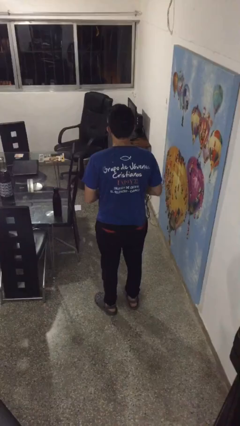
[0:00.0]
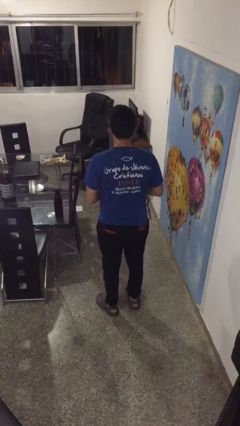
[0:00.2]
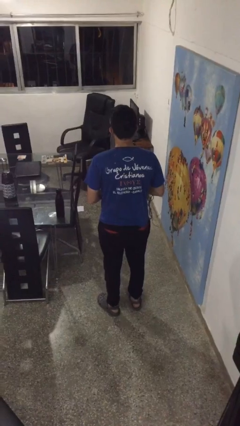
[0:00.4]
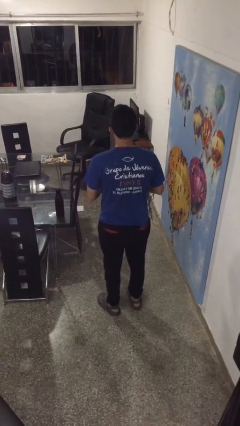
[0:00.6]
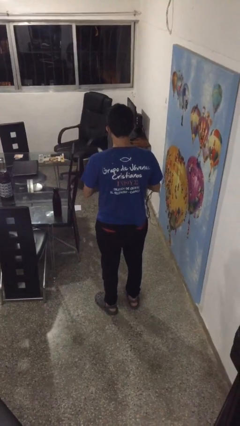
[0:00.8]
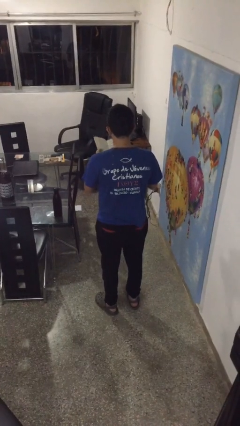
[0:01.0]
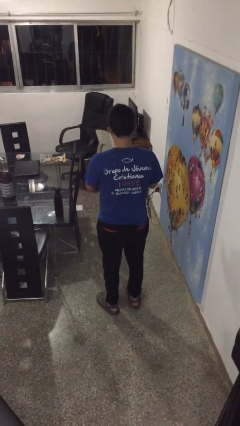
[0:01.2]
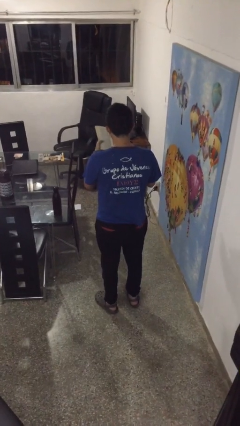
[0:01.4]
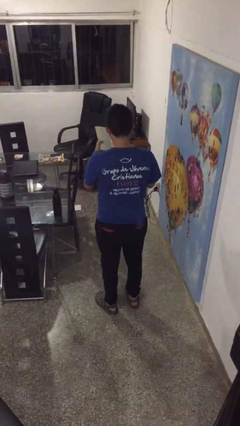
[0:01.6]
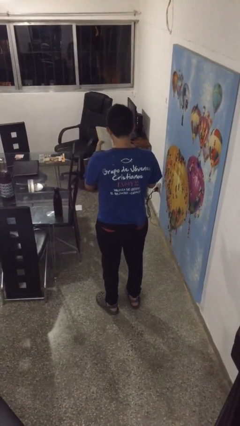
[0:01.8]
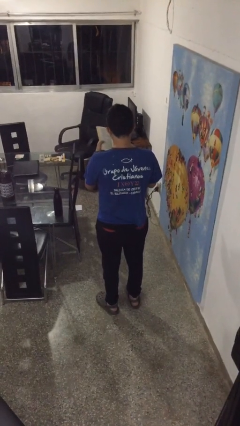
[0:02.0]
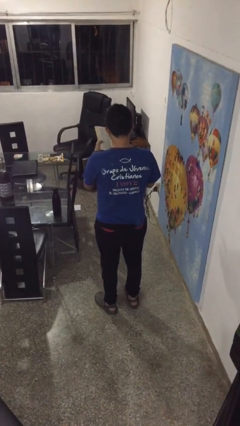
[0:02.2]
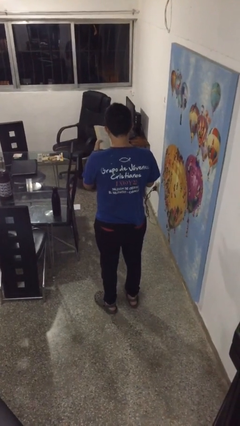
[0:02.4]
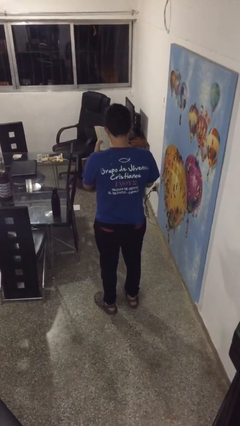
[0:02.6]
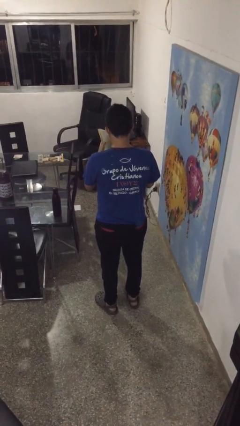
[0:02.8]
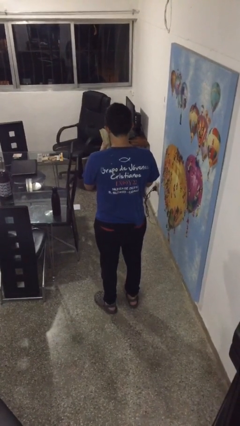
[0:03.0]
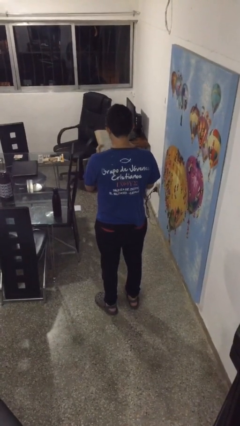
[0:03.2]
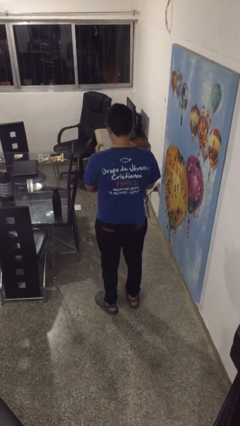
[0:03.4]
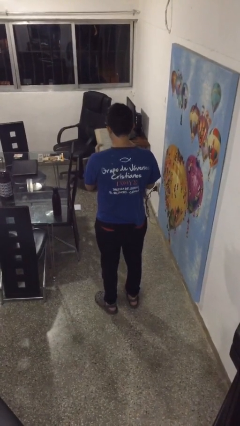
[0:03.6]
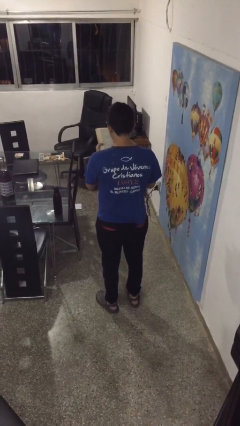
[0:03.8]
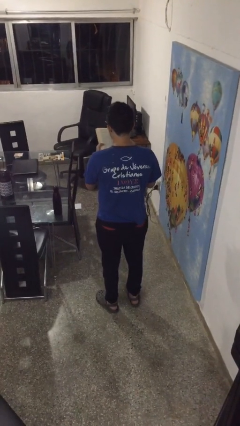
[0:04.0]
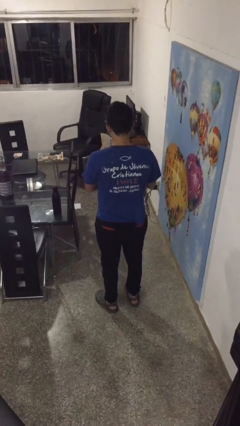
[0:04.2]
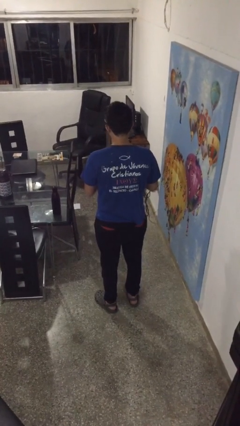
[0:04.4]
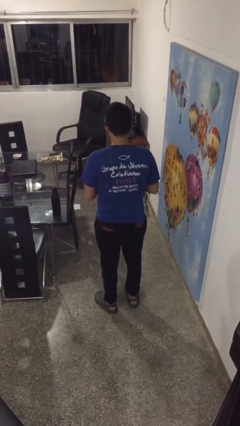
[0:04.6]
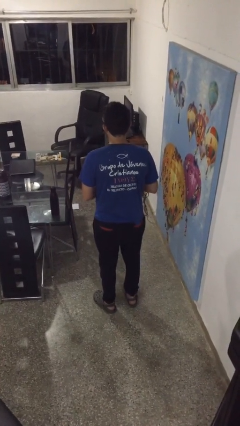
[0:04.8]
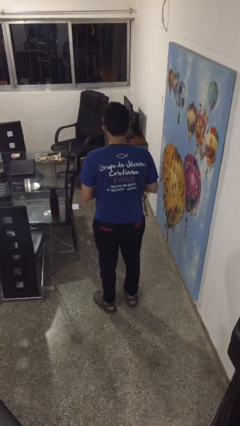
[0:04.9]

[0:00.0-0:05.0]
person reads book

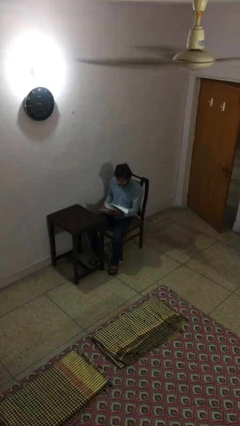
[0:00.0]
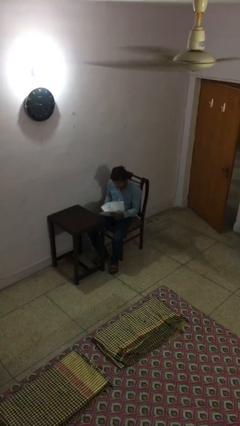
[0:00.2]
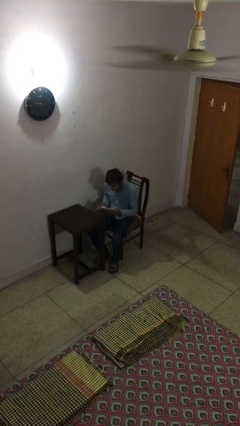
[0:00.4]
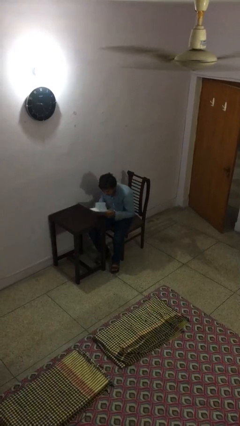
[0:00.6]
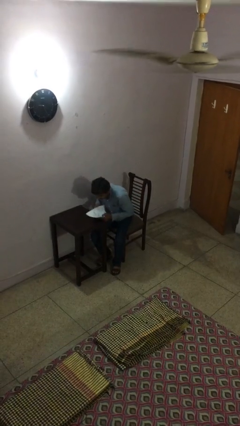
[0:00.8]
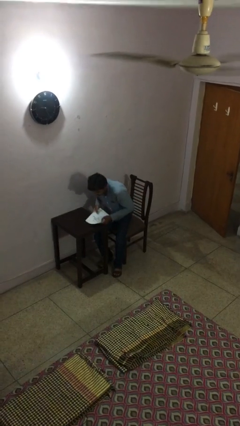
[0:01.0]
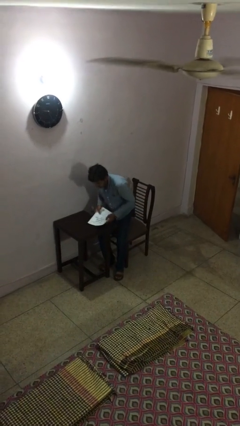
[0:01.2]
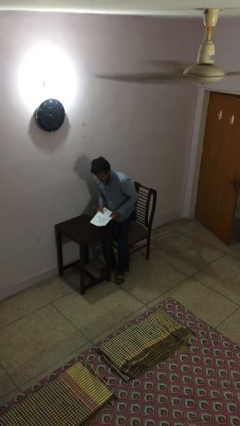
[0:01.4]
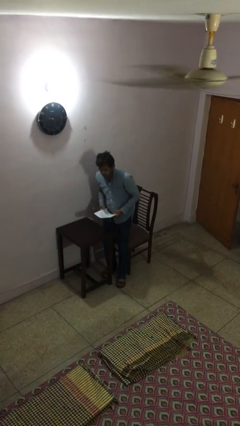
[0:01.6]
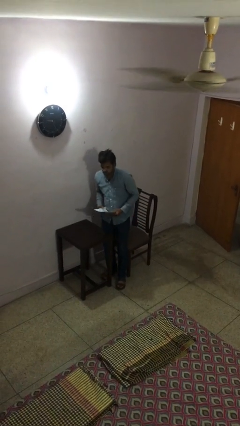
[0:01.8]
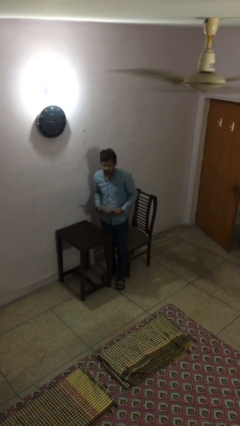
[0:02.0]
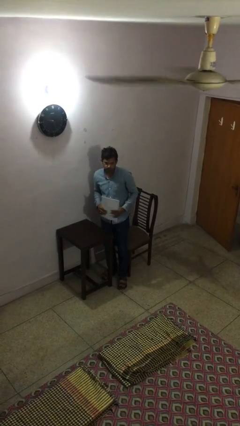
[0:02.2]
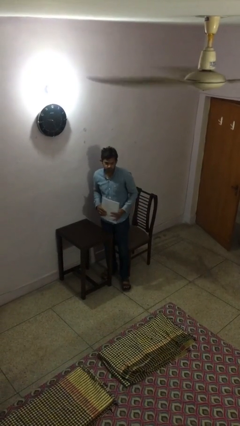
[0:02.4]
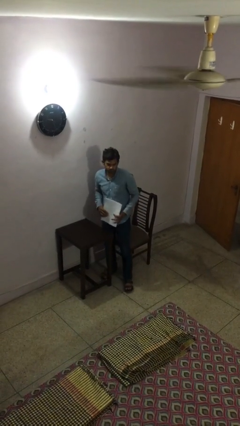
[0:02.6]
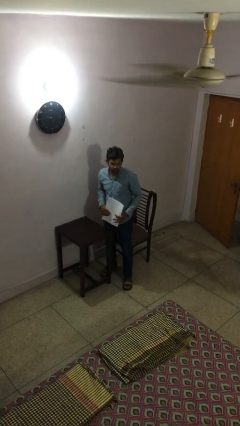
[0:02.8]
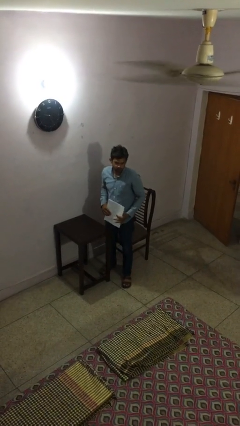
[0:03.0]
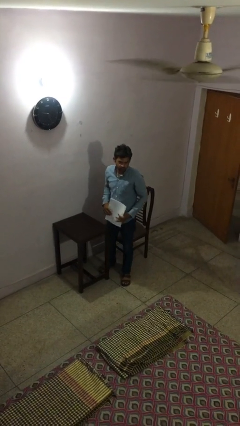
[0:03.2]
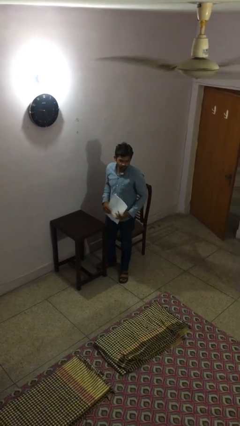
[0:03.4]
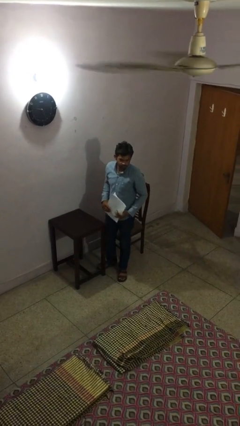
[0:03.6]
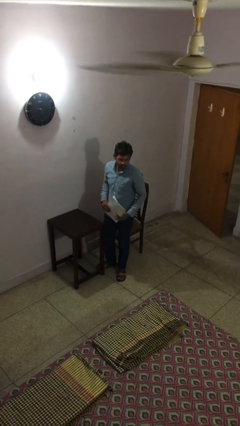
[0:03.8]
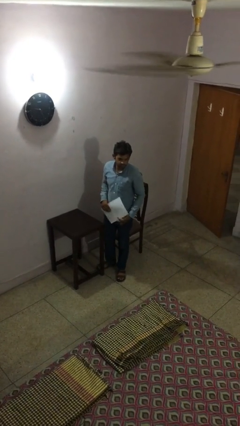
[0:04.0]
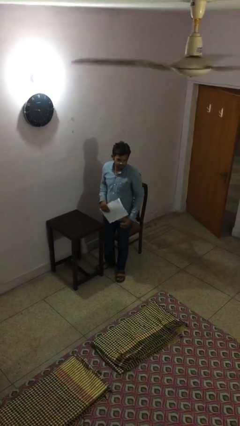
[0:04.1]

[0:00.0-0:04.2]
person stands up

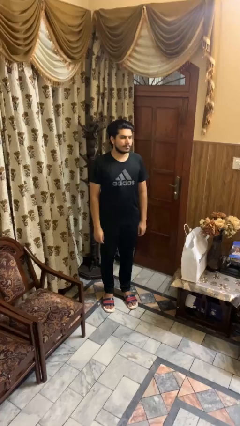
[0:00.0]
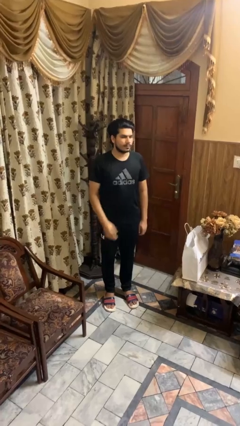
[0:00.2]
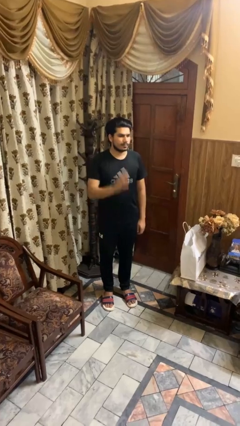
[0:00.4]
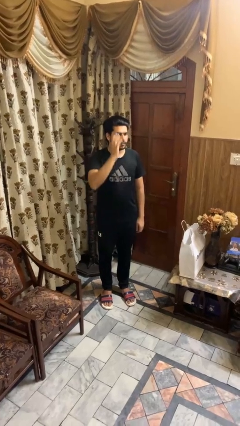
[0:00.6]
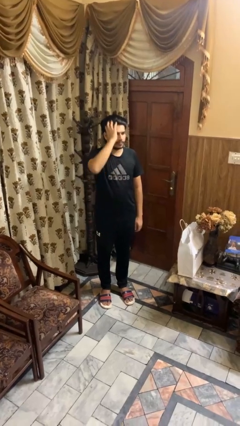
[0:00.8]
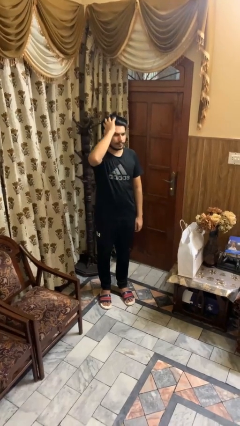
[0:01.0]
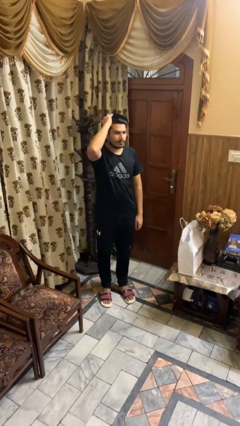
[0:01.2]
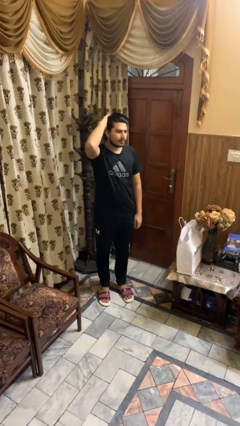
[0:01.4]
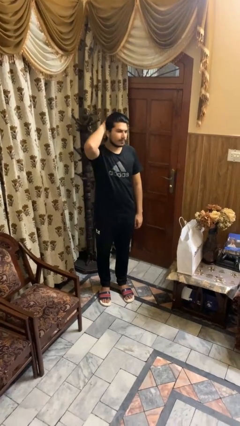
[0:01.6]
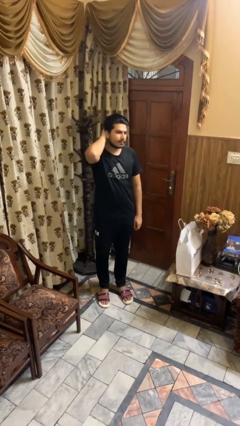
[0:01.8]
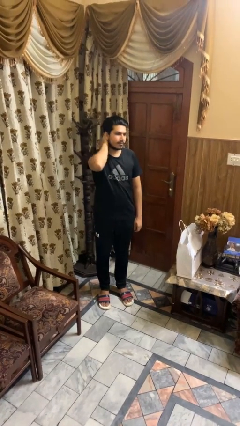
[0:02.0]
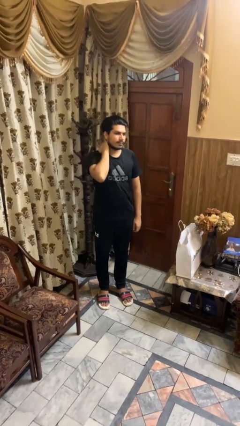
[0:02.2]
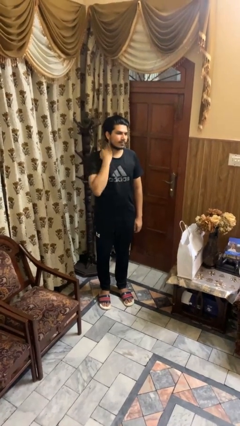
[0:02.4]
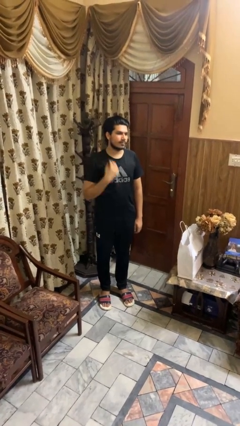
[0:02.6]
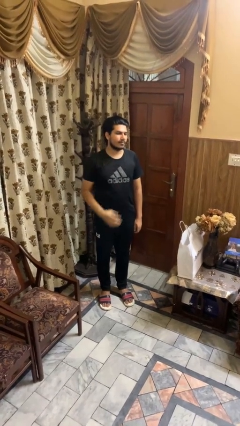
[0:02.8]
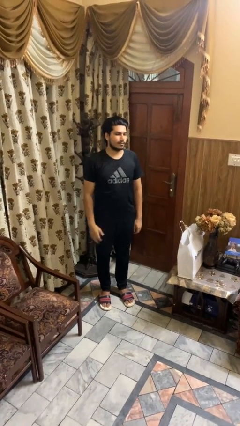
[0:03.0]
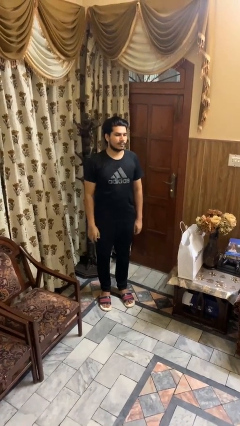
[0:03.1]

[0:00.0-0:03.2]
person strokes hair

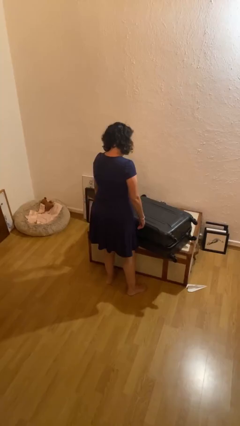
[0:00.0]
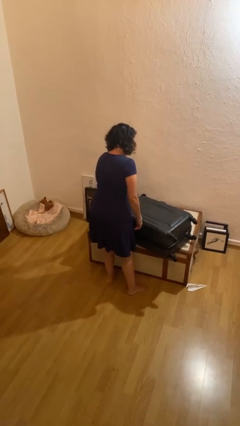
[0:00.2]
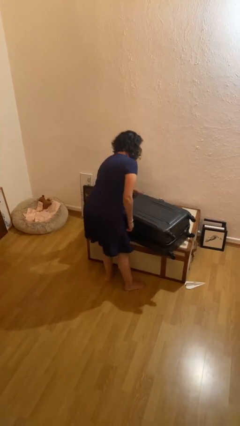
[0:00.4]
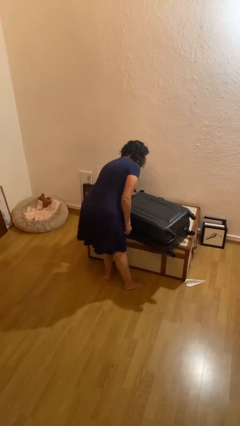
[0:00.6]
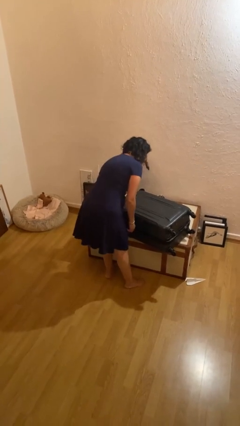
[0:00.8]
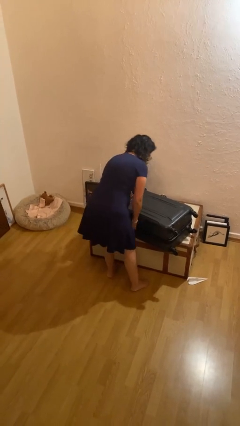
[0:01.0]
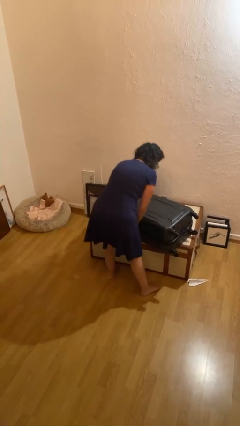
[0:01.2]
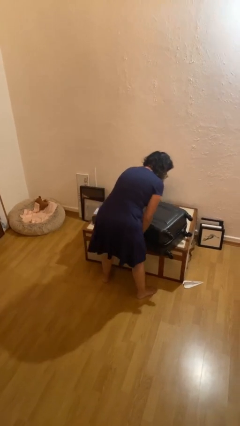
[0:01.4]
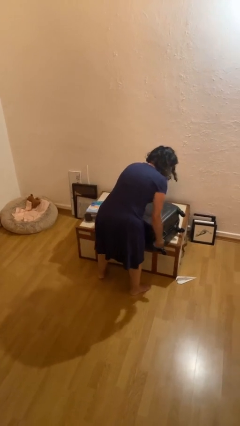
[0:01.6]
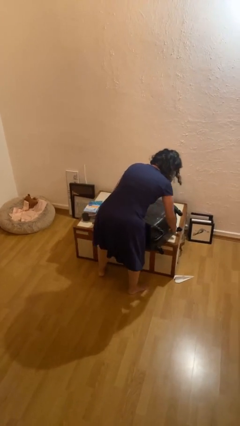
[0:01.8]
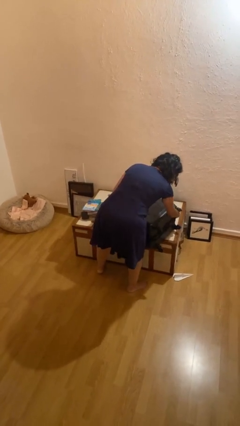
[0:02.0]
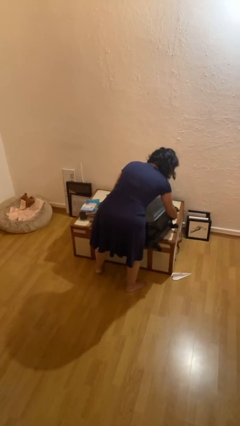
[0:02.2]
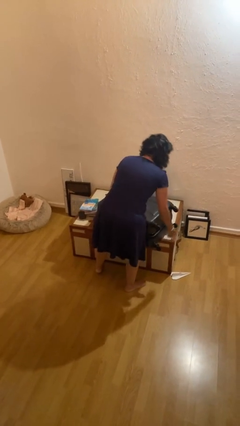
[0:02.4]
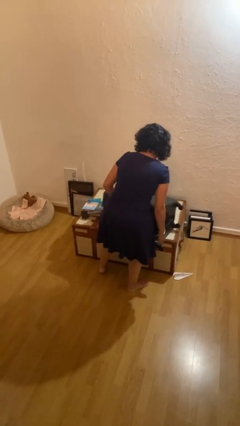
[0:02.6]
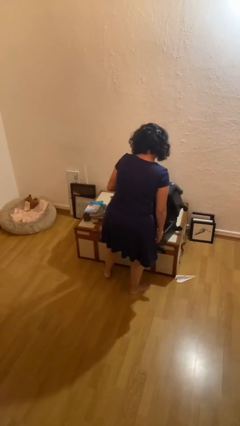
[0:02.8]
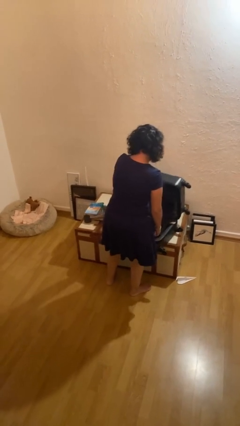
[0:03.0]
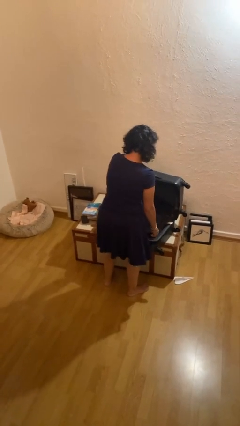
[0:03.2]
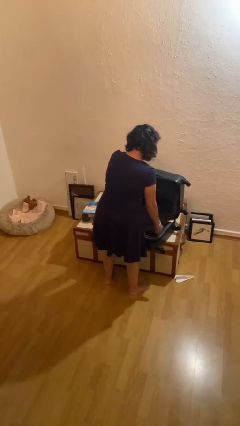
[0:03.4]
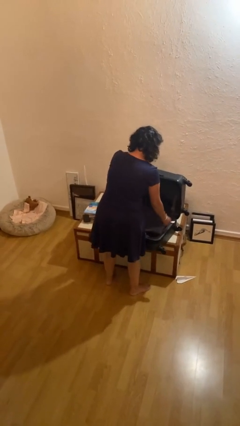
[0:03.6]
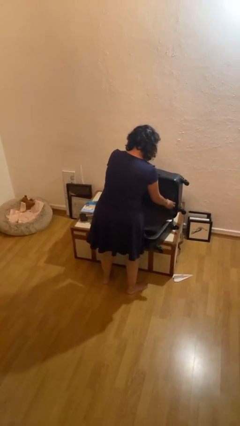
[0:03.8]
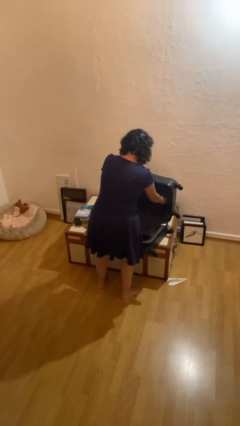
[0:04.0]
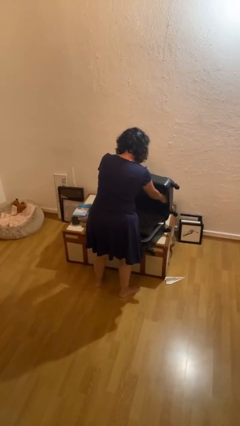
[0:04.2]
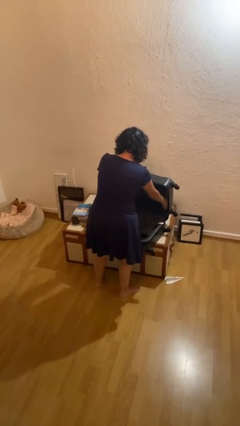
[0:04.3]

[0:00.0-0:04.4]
person opens suitcase

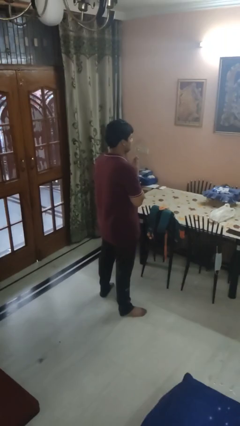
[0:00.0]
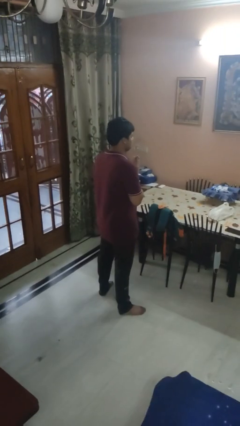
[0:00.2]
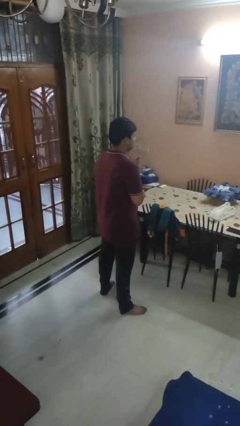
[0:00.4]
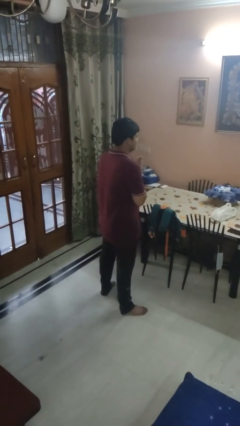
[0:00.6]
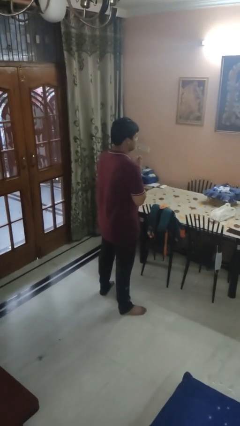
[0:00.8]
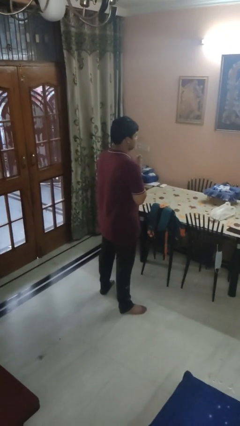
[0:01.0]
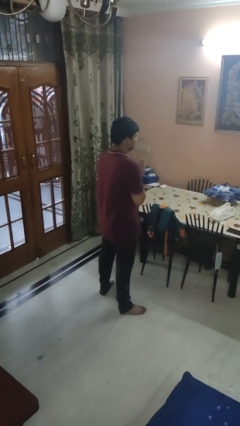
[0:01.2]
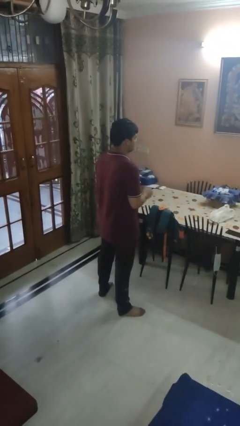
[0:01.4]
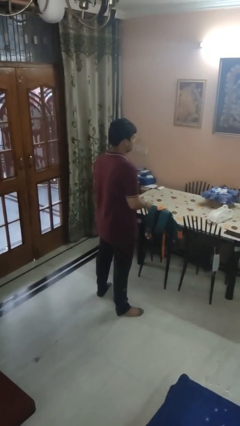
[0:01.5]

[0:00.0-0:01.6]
person prays
